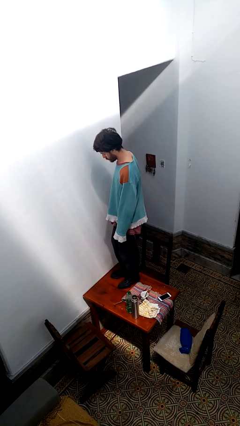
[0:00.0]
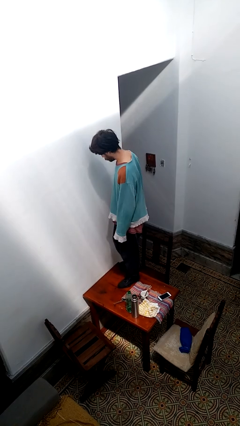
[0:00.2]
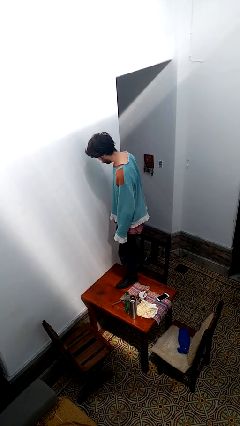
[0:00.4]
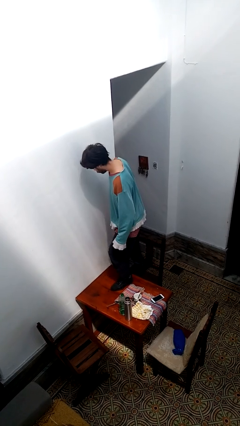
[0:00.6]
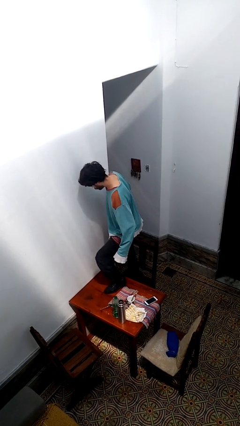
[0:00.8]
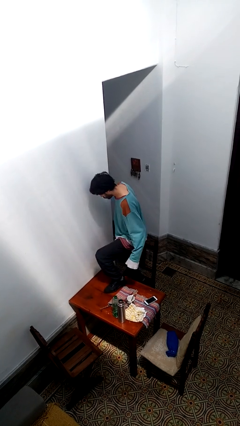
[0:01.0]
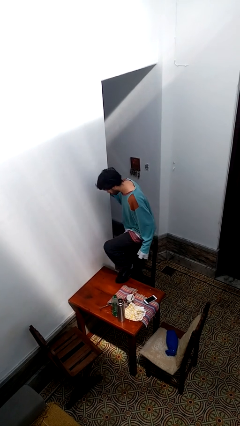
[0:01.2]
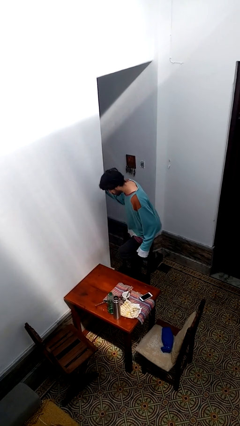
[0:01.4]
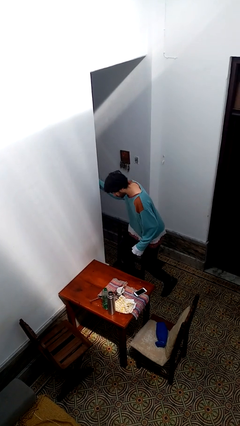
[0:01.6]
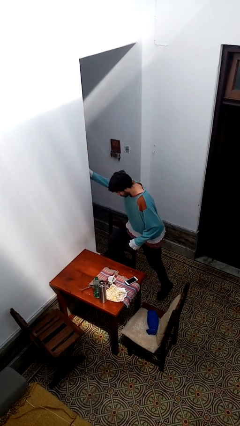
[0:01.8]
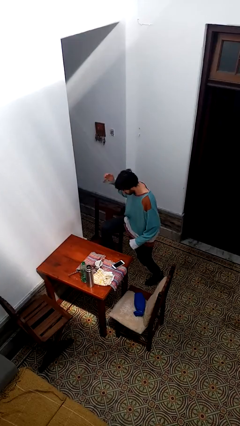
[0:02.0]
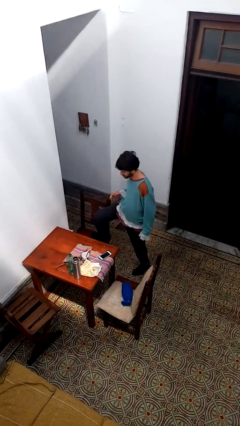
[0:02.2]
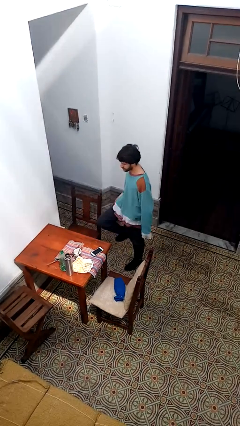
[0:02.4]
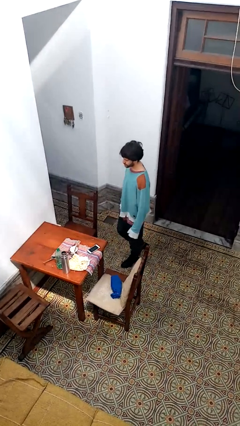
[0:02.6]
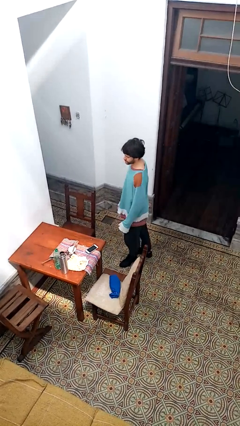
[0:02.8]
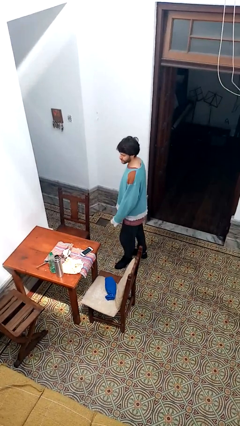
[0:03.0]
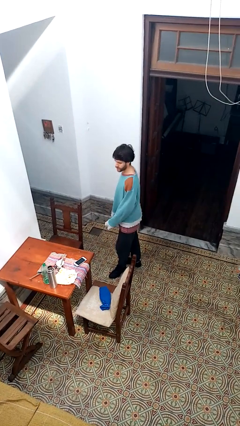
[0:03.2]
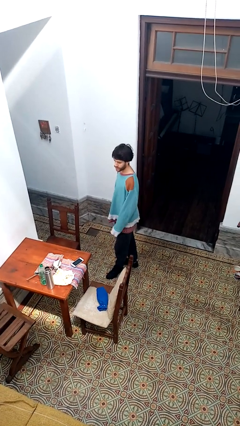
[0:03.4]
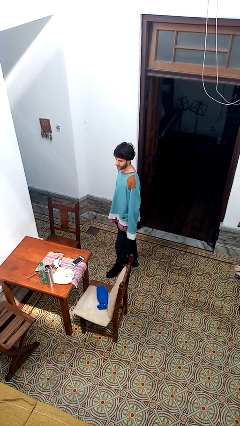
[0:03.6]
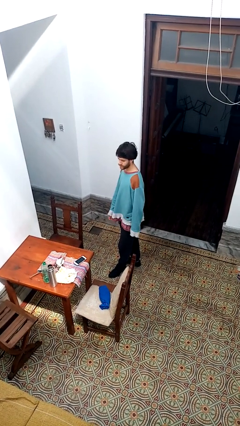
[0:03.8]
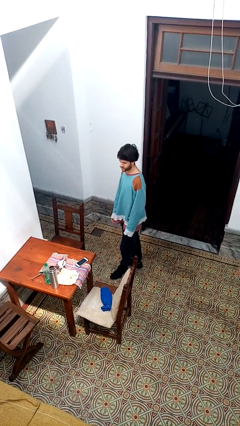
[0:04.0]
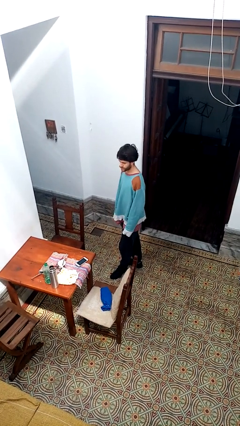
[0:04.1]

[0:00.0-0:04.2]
person climbs off table

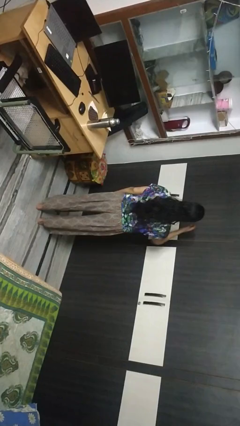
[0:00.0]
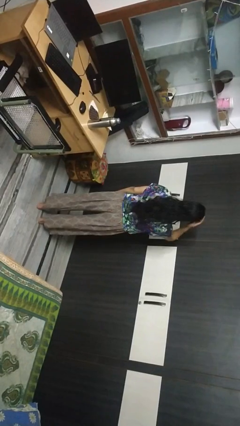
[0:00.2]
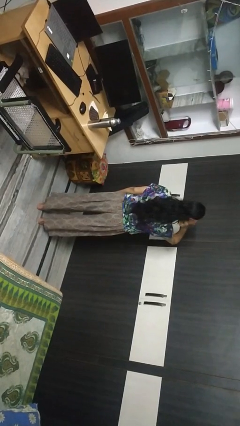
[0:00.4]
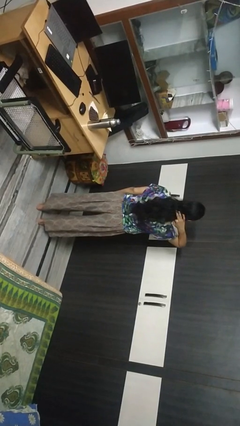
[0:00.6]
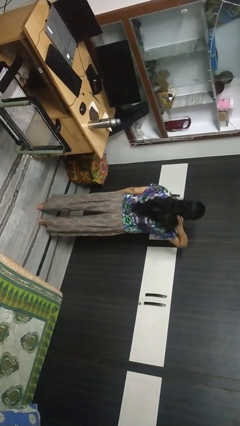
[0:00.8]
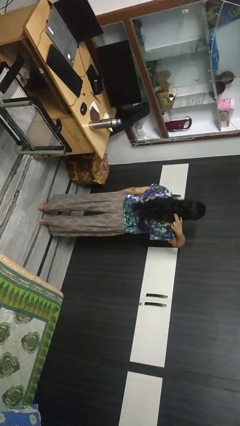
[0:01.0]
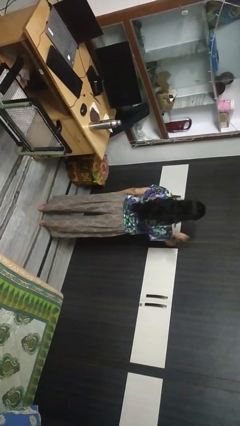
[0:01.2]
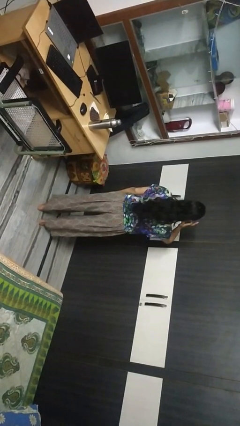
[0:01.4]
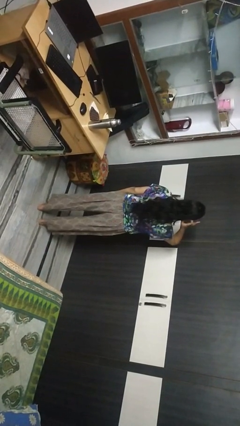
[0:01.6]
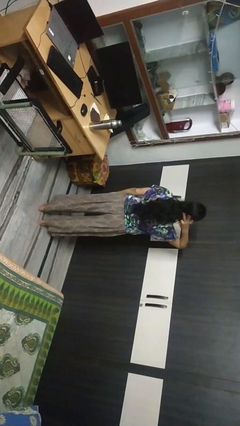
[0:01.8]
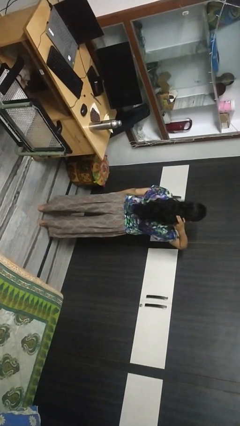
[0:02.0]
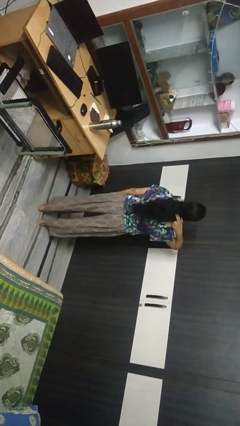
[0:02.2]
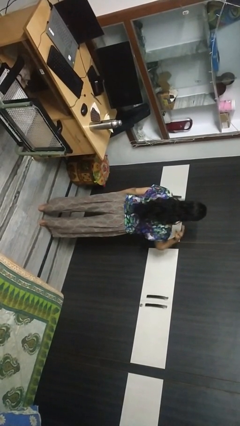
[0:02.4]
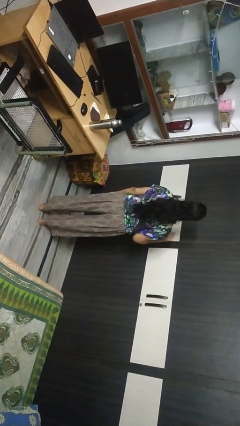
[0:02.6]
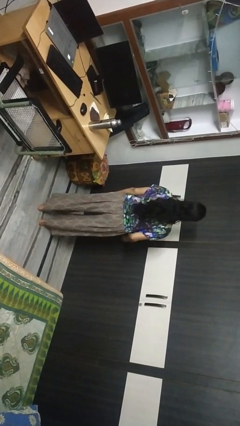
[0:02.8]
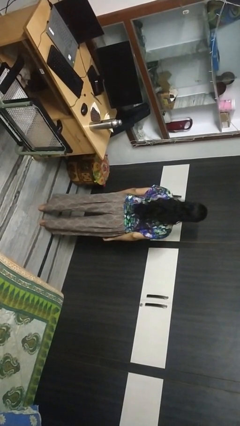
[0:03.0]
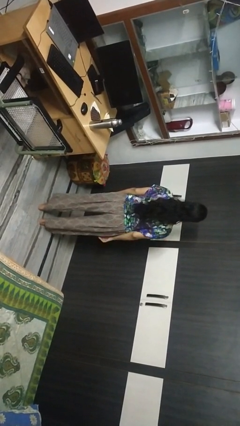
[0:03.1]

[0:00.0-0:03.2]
person strokes hair

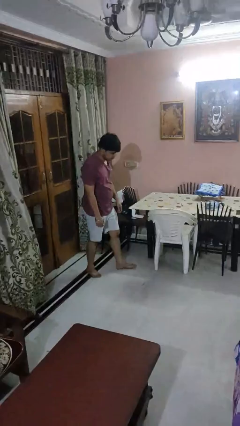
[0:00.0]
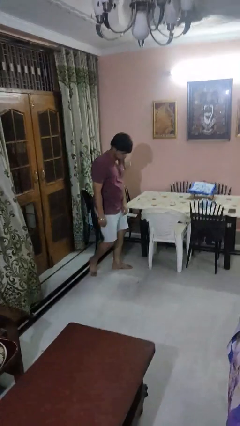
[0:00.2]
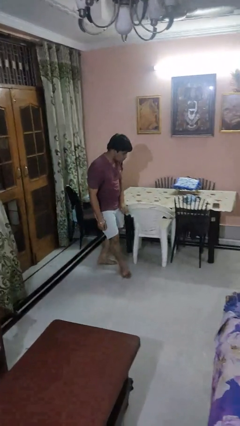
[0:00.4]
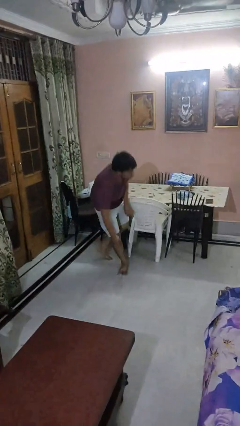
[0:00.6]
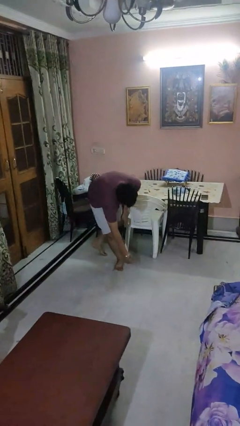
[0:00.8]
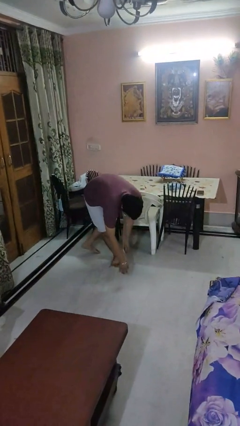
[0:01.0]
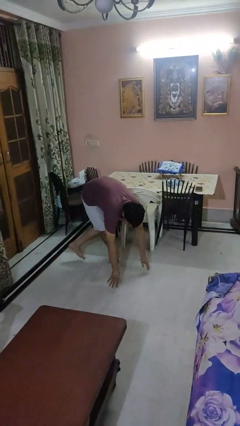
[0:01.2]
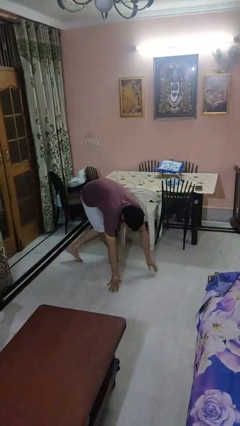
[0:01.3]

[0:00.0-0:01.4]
person trips on object on floor

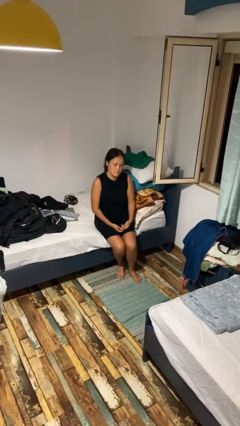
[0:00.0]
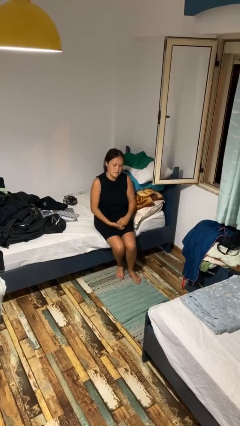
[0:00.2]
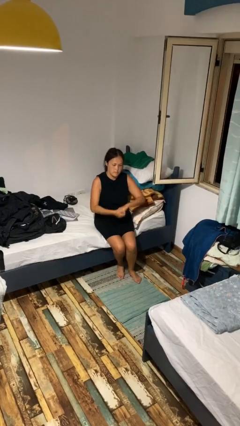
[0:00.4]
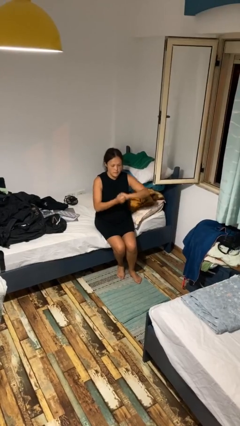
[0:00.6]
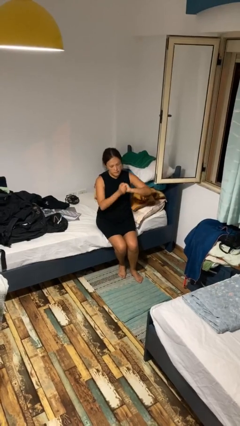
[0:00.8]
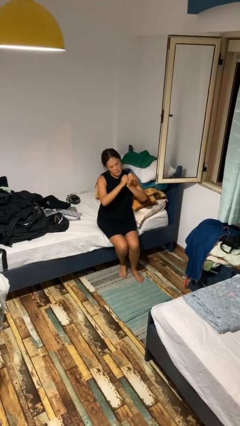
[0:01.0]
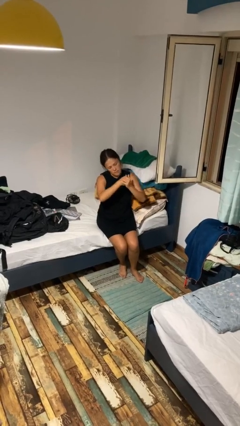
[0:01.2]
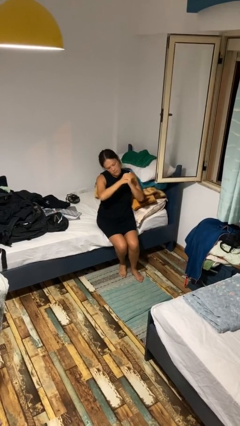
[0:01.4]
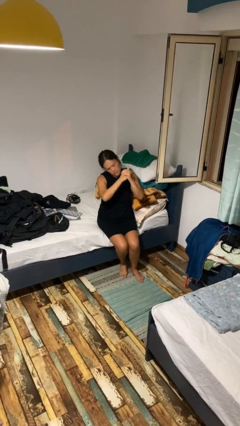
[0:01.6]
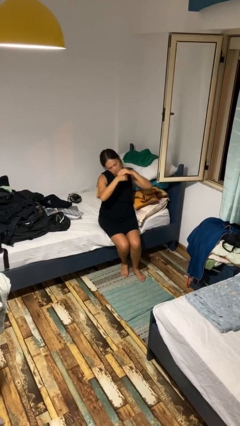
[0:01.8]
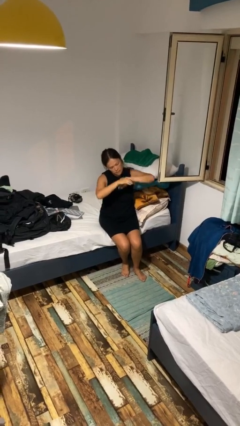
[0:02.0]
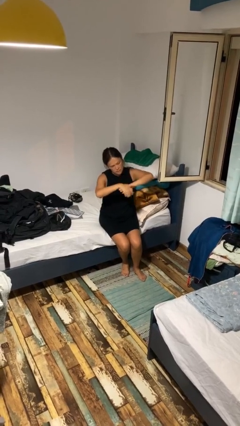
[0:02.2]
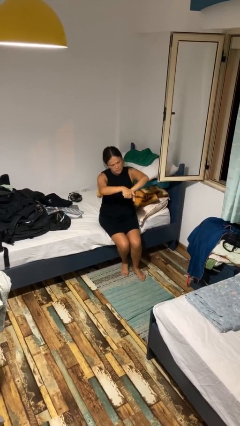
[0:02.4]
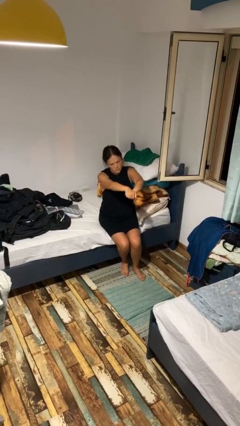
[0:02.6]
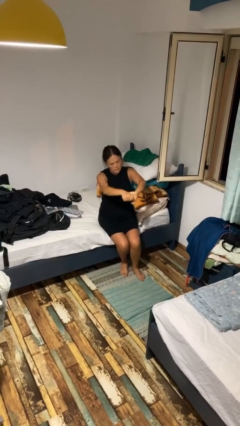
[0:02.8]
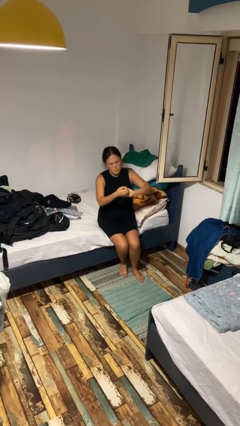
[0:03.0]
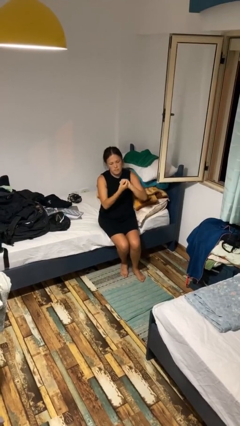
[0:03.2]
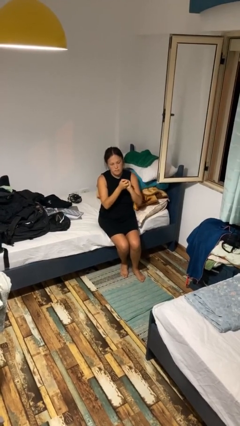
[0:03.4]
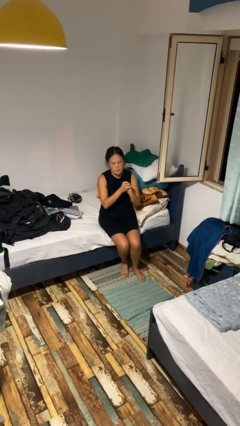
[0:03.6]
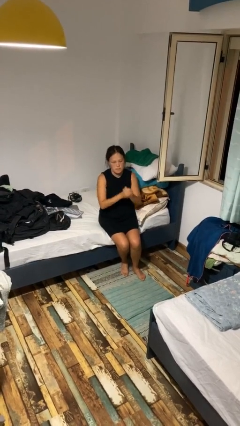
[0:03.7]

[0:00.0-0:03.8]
person cracks knuckles

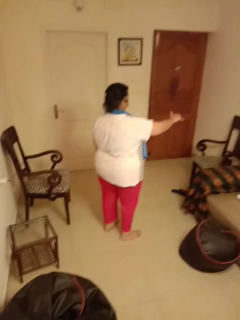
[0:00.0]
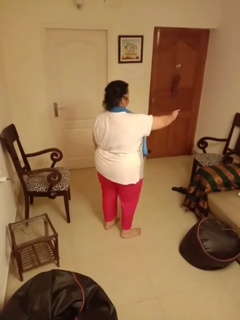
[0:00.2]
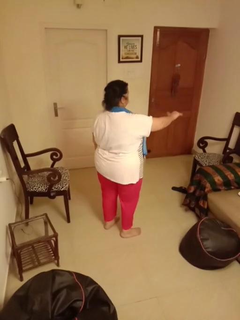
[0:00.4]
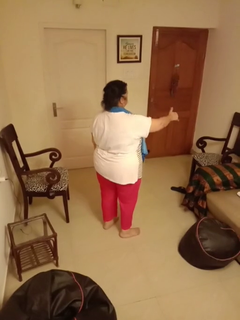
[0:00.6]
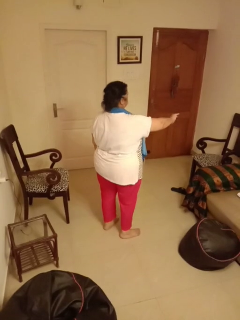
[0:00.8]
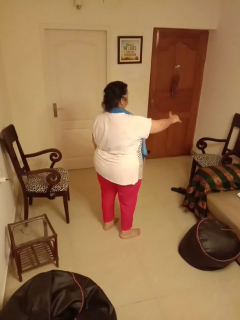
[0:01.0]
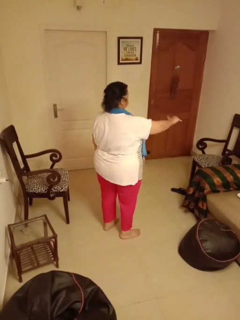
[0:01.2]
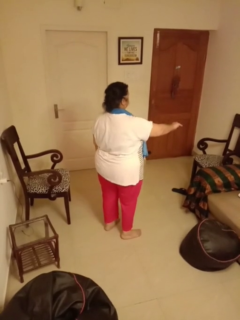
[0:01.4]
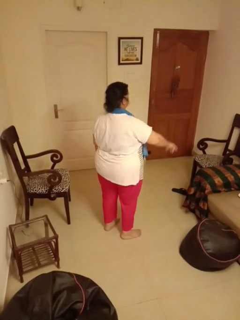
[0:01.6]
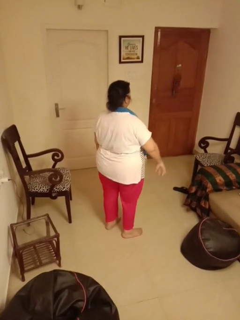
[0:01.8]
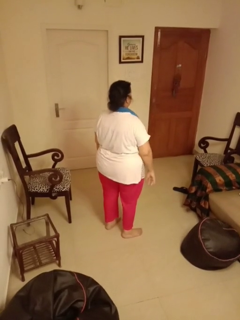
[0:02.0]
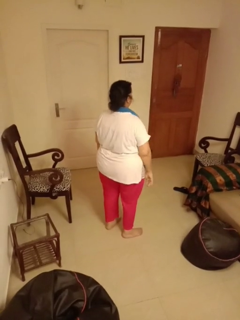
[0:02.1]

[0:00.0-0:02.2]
person gestures hang loose

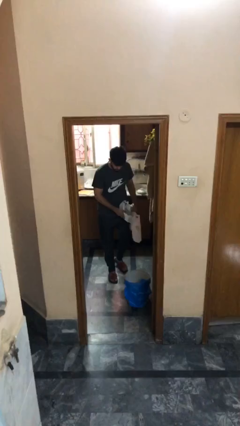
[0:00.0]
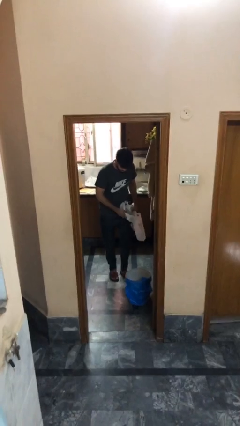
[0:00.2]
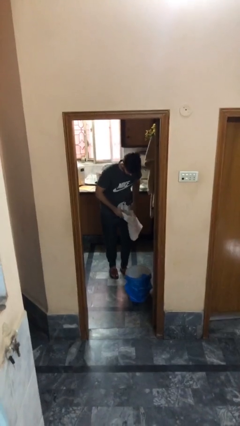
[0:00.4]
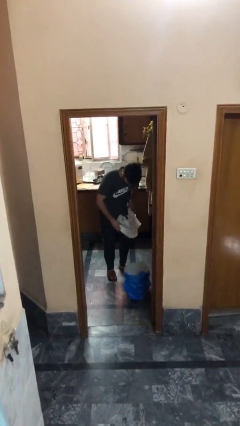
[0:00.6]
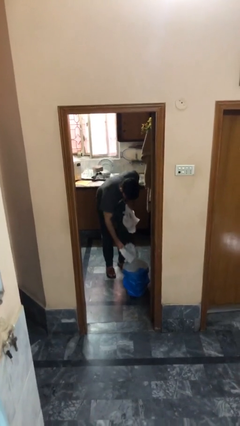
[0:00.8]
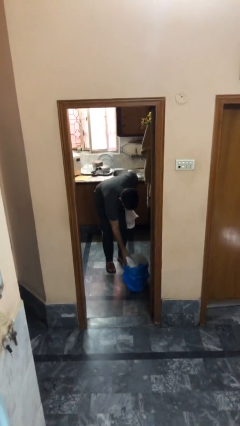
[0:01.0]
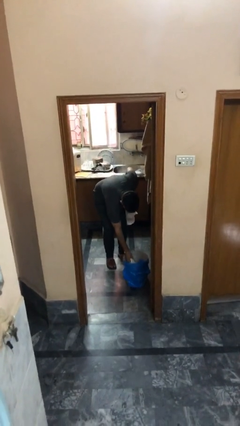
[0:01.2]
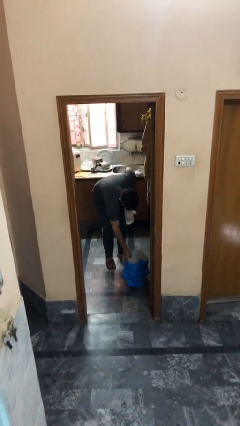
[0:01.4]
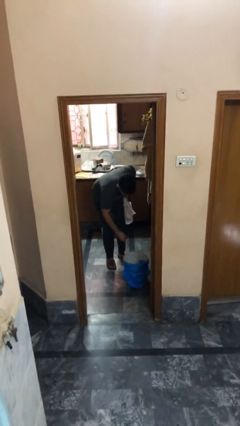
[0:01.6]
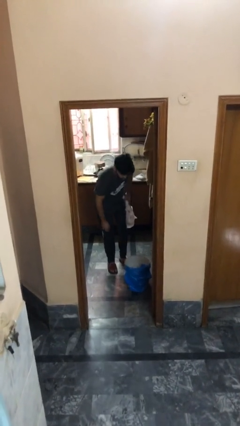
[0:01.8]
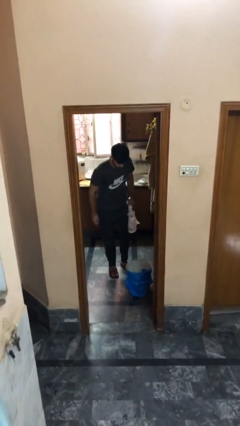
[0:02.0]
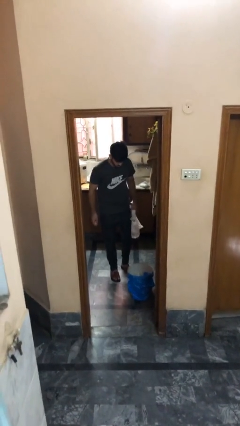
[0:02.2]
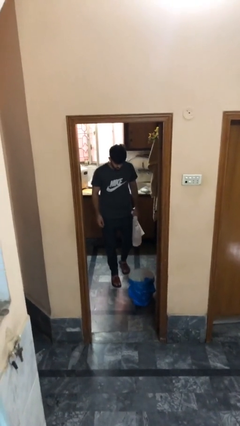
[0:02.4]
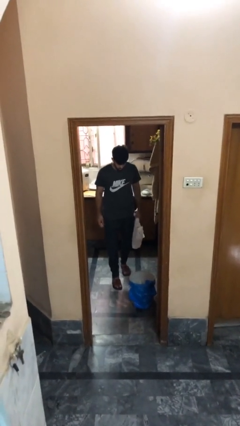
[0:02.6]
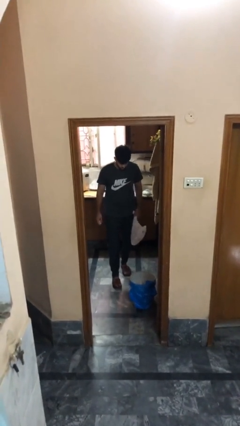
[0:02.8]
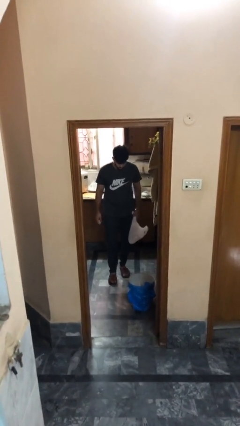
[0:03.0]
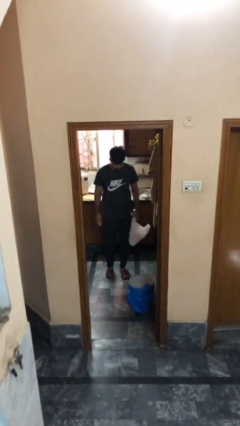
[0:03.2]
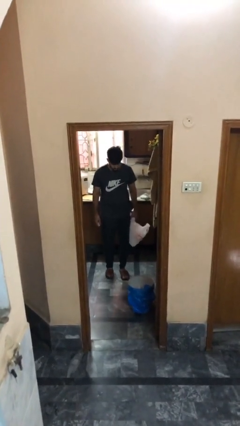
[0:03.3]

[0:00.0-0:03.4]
person discards trash
